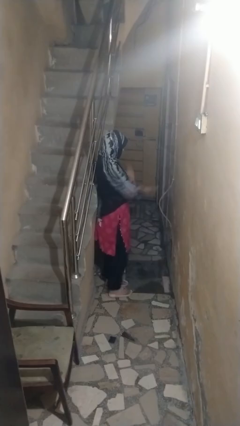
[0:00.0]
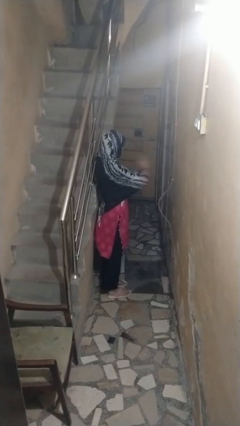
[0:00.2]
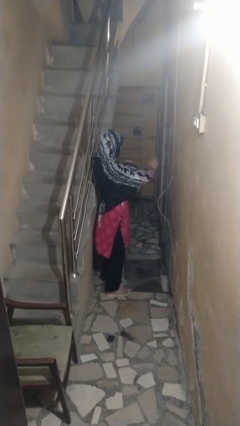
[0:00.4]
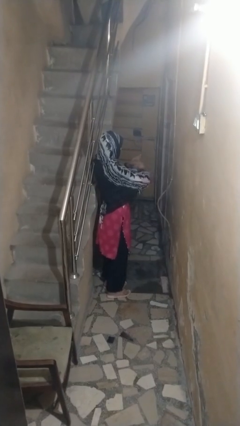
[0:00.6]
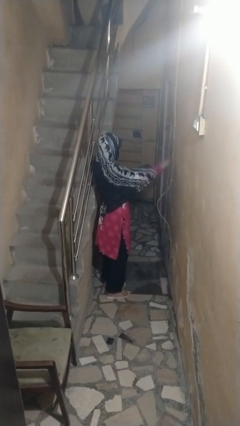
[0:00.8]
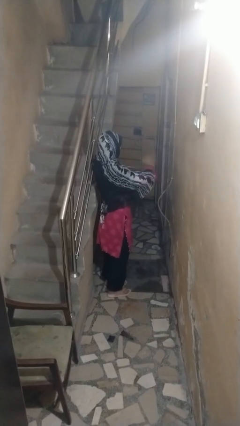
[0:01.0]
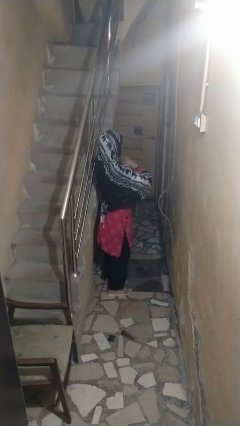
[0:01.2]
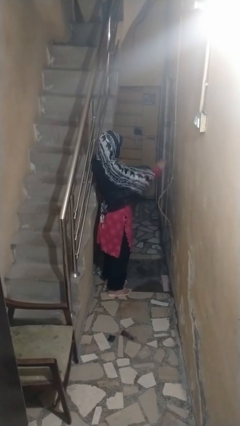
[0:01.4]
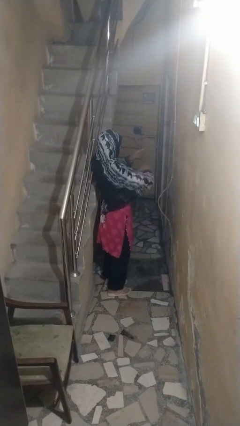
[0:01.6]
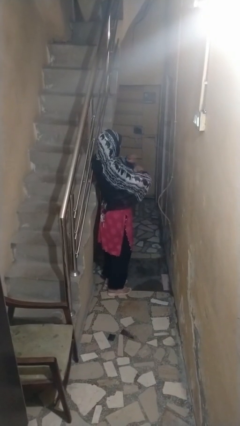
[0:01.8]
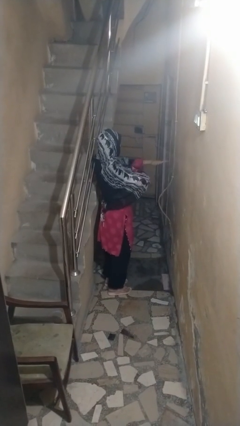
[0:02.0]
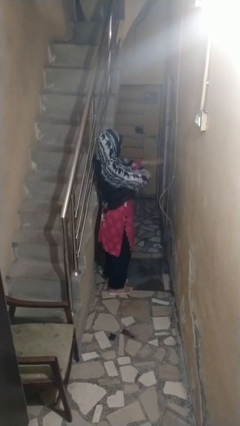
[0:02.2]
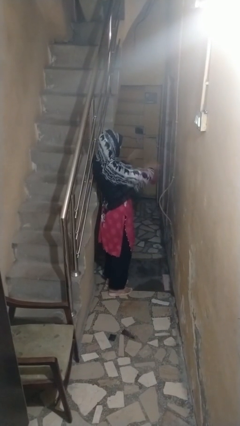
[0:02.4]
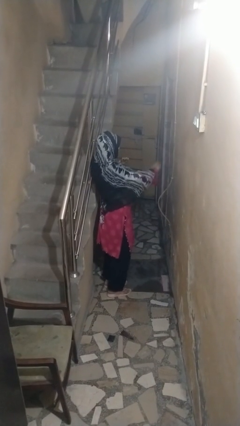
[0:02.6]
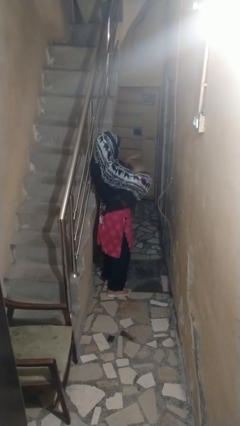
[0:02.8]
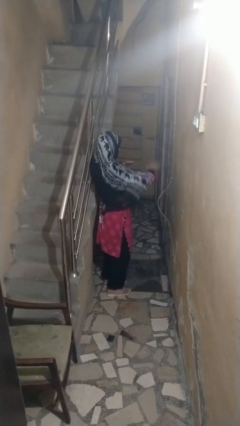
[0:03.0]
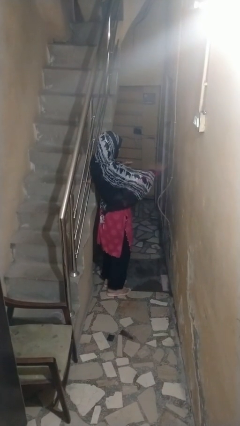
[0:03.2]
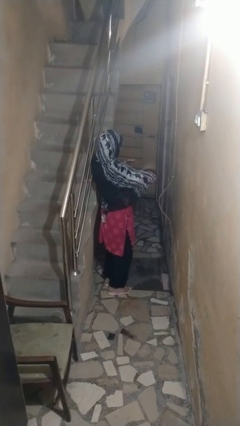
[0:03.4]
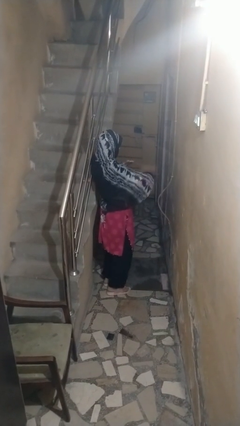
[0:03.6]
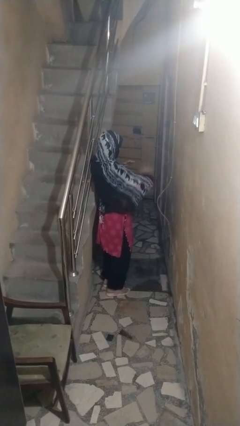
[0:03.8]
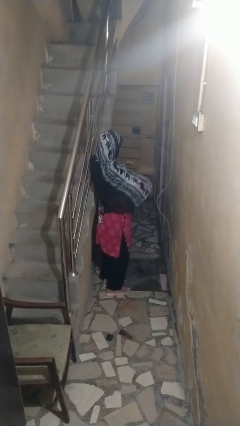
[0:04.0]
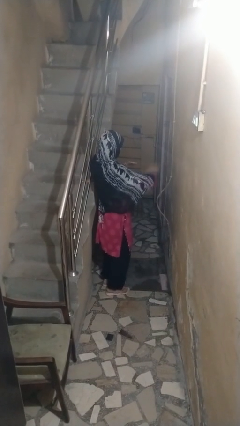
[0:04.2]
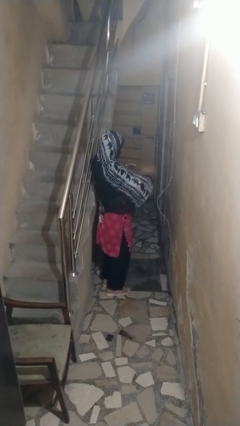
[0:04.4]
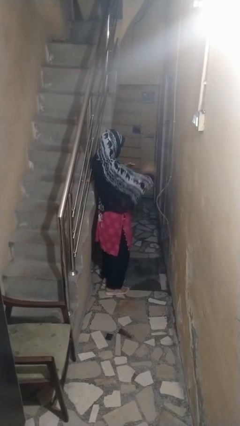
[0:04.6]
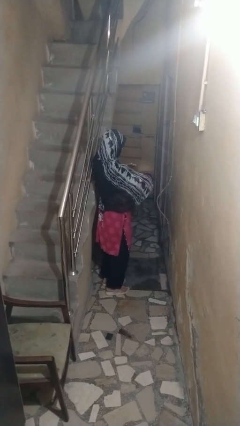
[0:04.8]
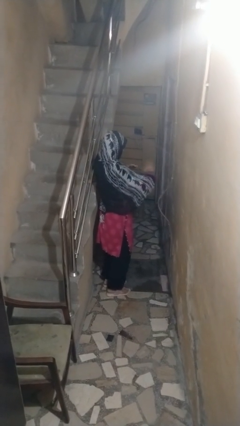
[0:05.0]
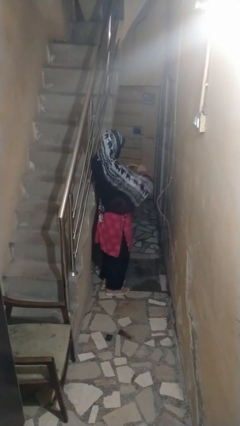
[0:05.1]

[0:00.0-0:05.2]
person karate chop

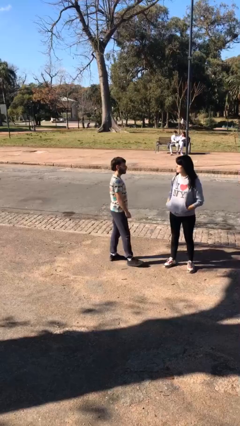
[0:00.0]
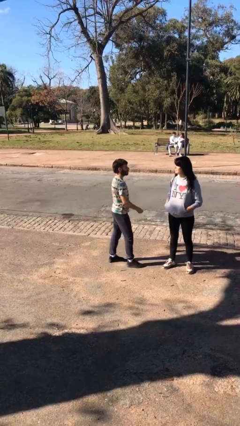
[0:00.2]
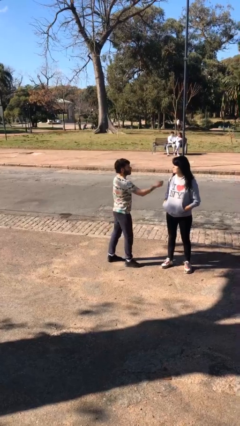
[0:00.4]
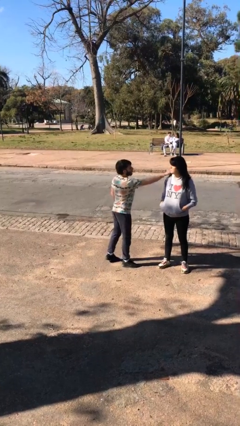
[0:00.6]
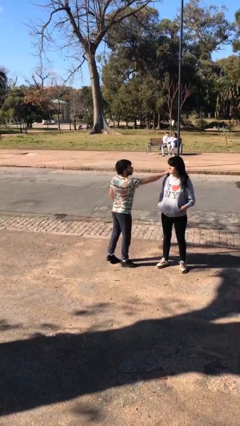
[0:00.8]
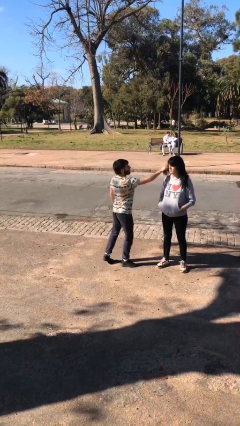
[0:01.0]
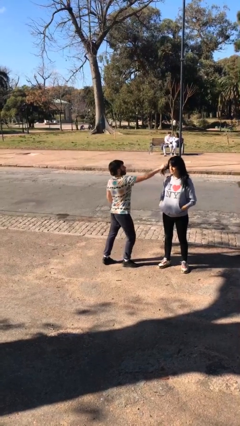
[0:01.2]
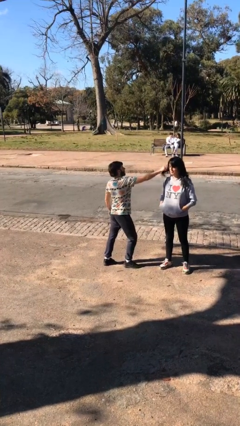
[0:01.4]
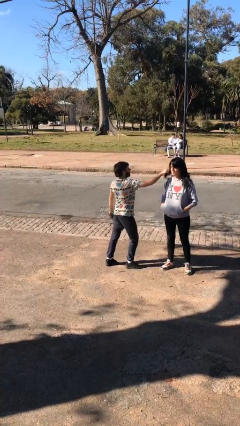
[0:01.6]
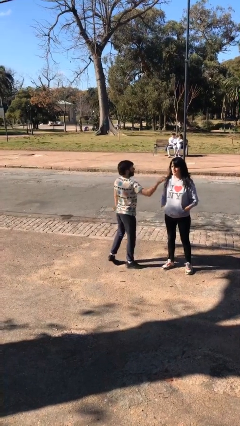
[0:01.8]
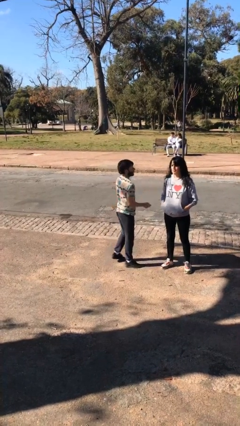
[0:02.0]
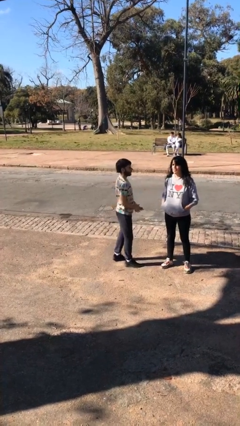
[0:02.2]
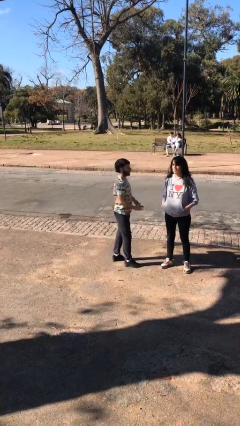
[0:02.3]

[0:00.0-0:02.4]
person grabs person by hair

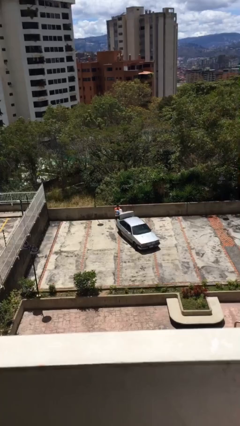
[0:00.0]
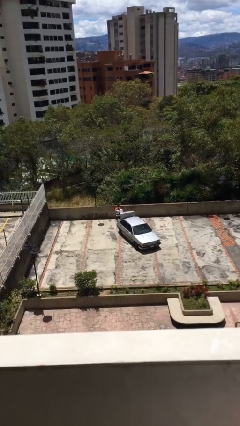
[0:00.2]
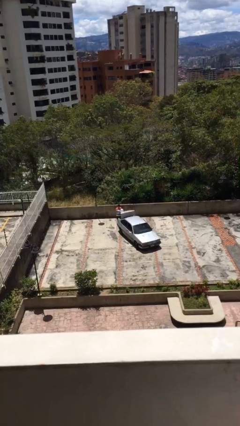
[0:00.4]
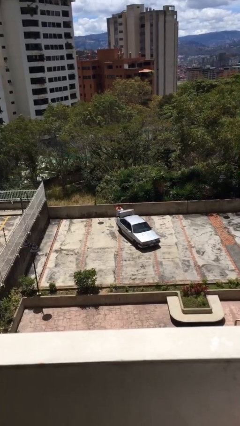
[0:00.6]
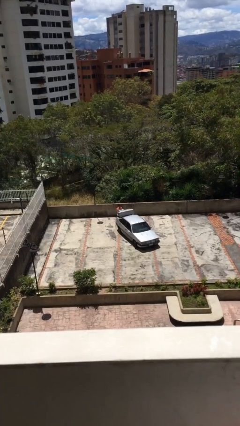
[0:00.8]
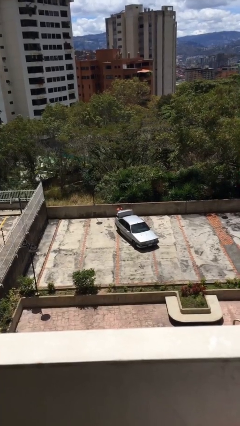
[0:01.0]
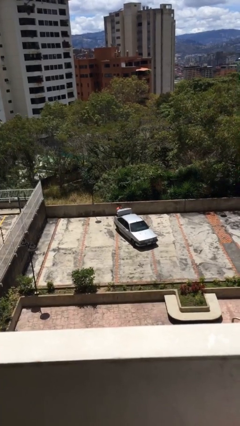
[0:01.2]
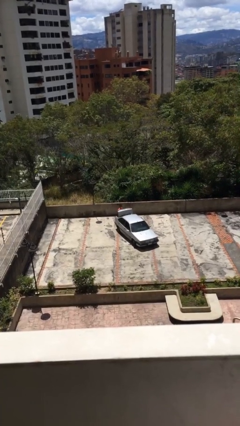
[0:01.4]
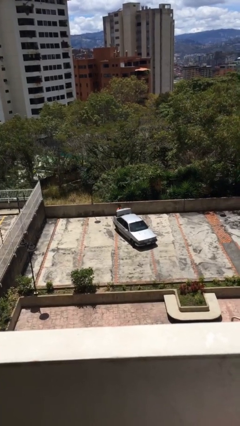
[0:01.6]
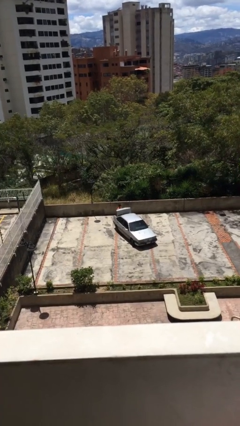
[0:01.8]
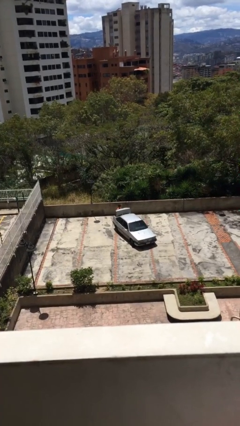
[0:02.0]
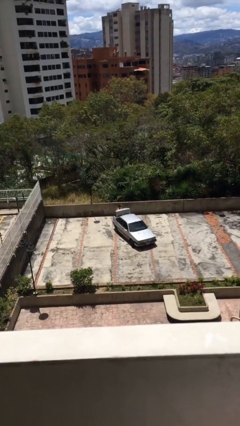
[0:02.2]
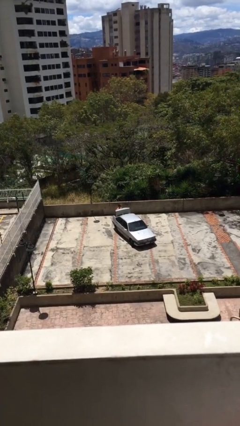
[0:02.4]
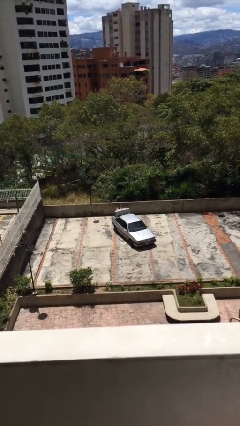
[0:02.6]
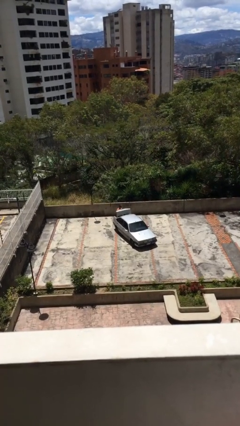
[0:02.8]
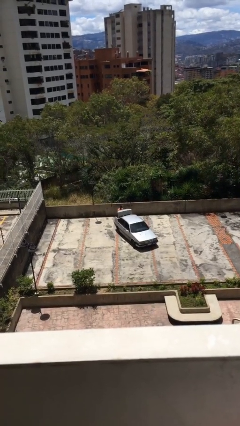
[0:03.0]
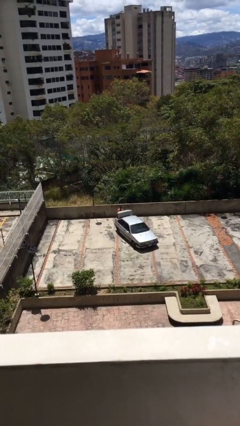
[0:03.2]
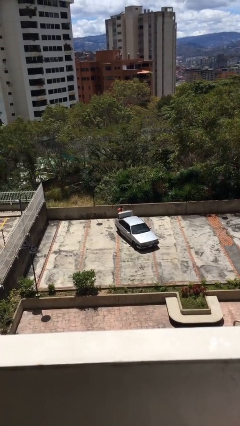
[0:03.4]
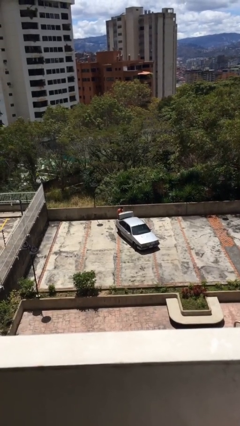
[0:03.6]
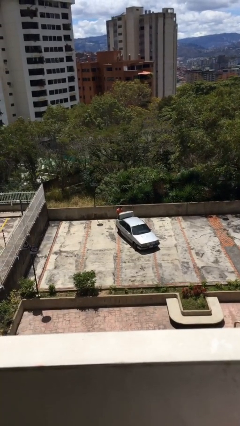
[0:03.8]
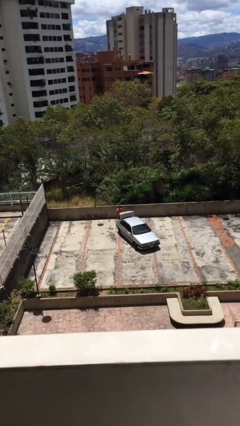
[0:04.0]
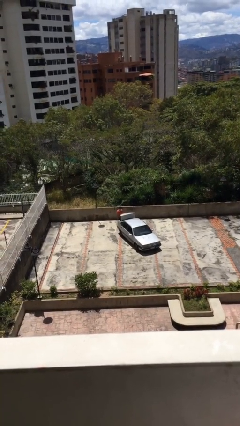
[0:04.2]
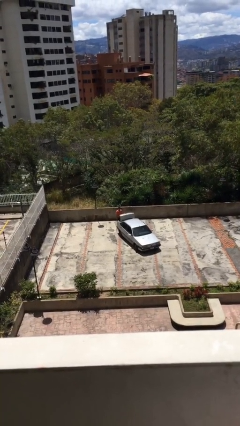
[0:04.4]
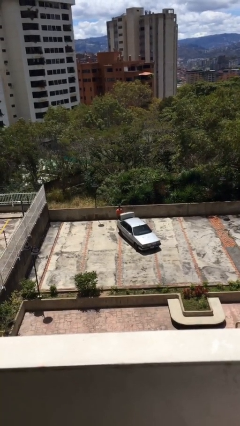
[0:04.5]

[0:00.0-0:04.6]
person loads car

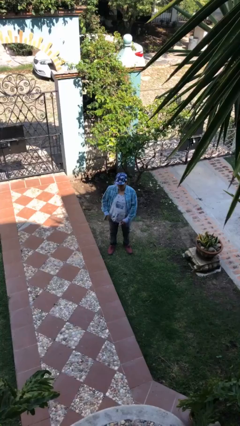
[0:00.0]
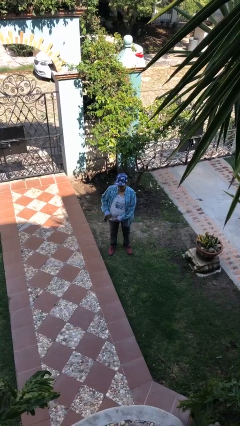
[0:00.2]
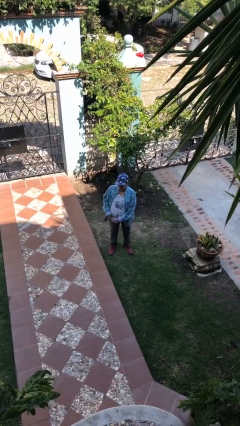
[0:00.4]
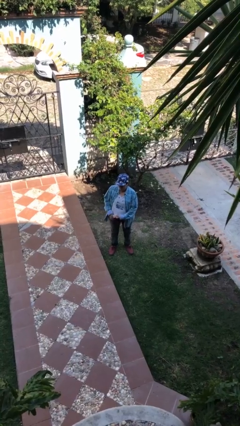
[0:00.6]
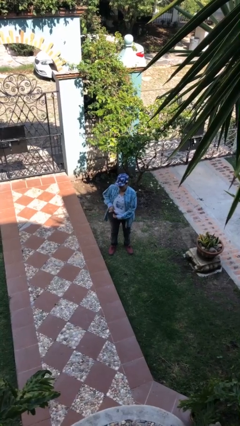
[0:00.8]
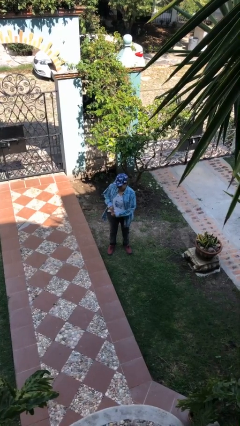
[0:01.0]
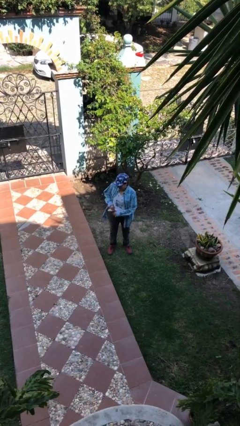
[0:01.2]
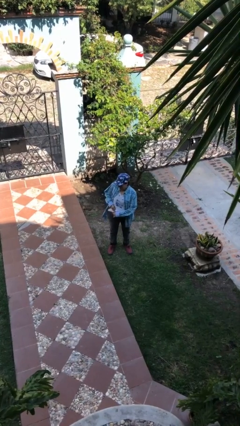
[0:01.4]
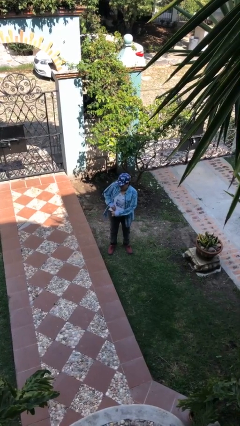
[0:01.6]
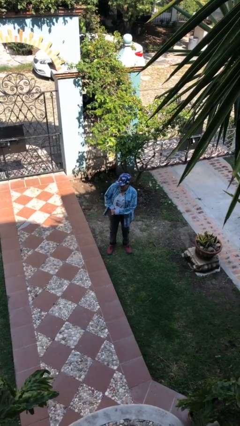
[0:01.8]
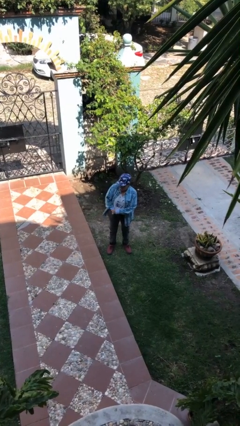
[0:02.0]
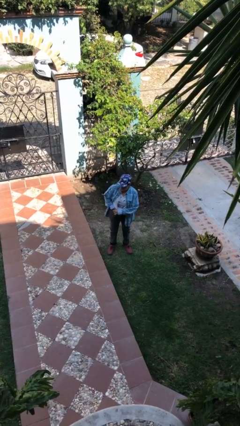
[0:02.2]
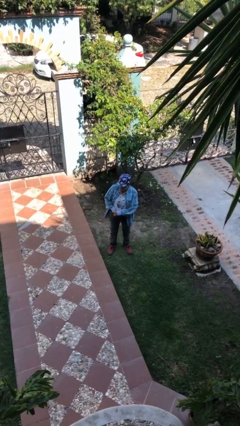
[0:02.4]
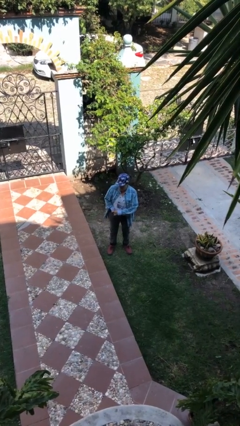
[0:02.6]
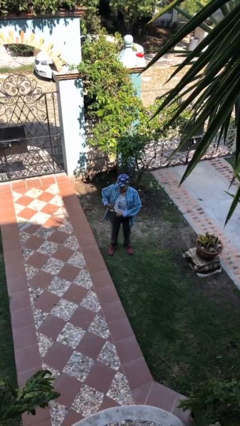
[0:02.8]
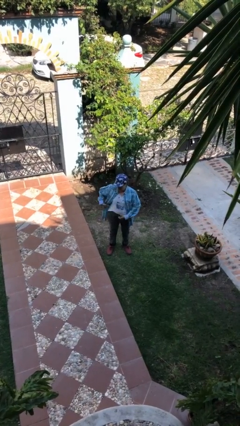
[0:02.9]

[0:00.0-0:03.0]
person tucks in shirt

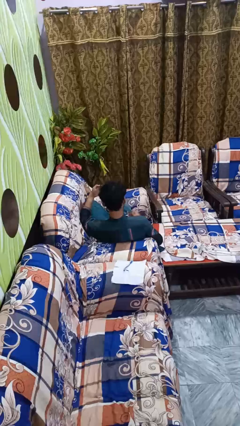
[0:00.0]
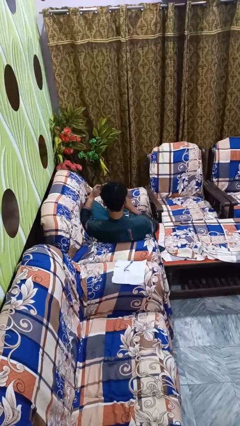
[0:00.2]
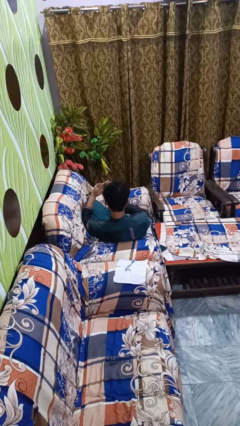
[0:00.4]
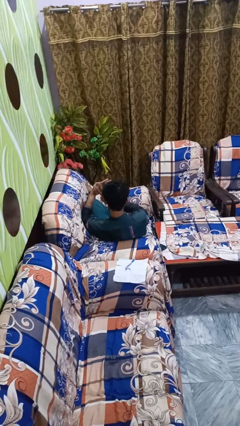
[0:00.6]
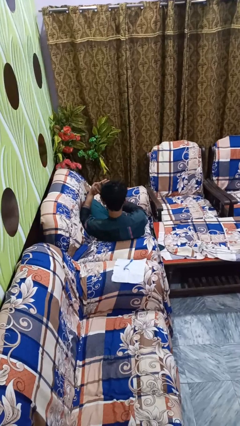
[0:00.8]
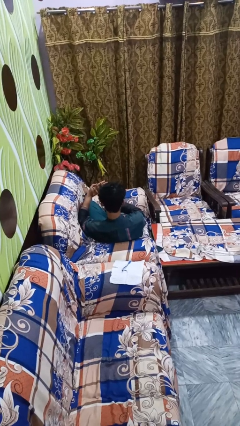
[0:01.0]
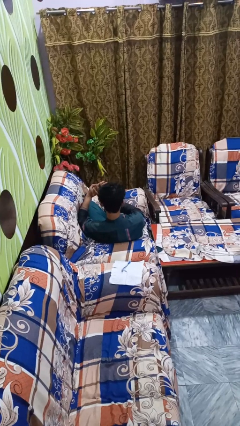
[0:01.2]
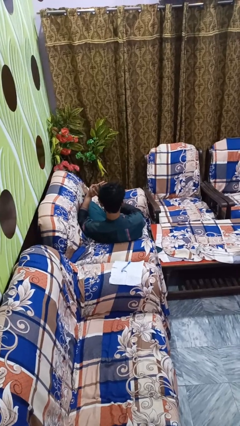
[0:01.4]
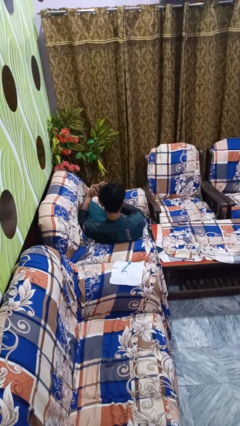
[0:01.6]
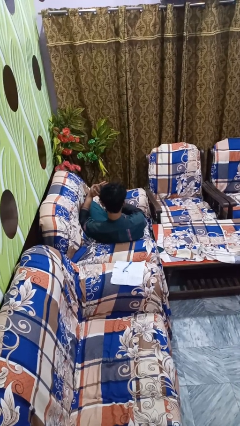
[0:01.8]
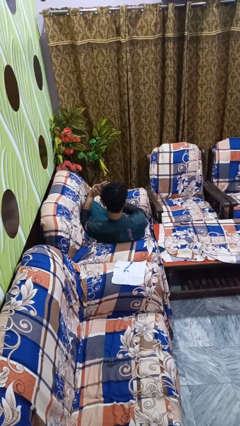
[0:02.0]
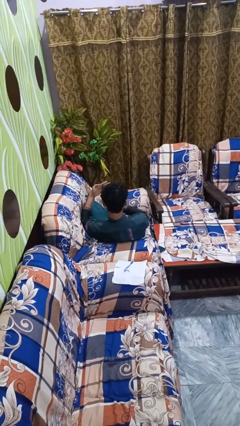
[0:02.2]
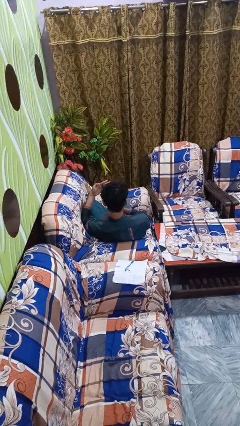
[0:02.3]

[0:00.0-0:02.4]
person gestures number four
